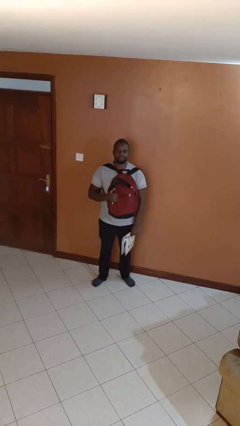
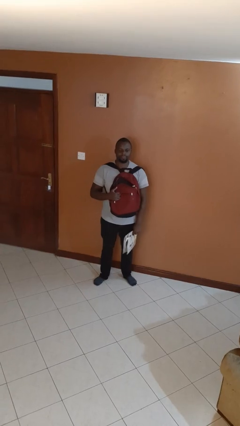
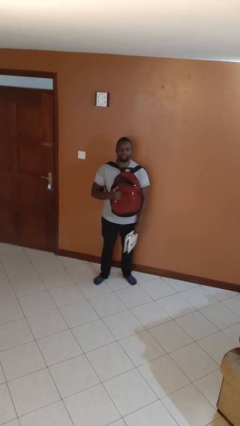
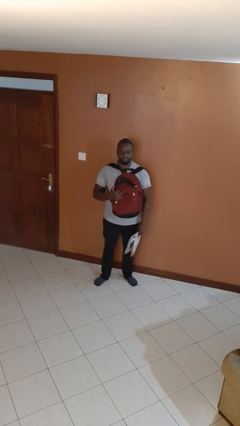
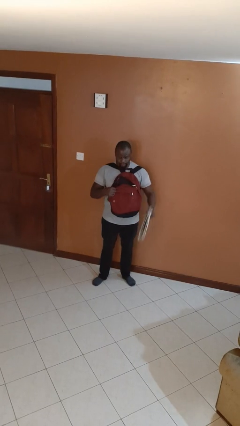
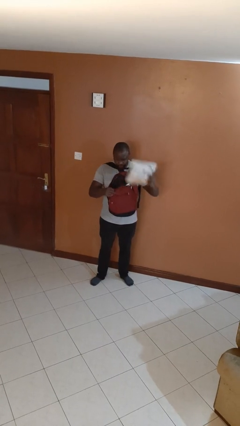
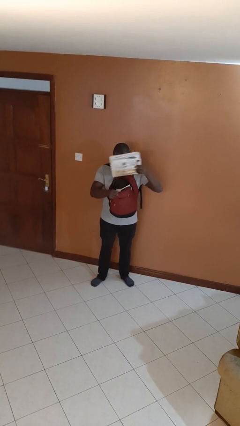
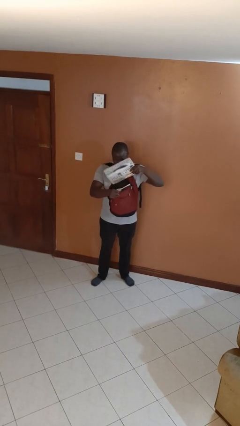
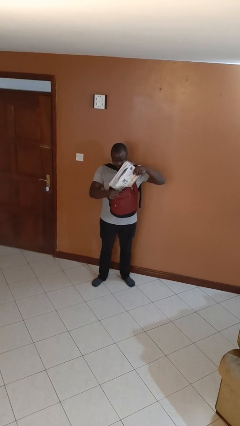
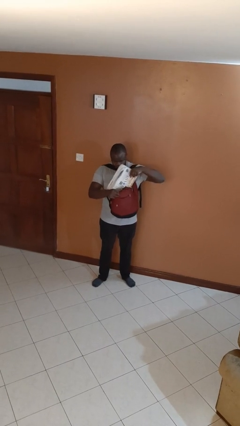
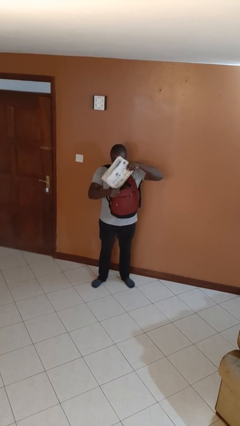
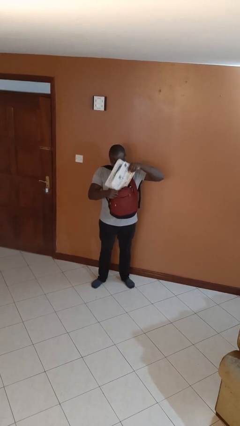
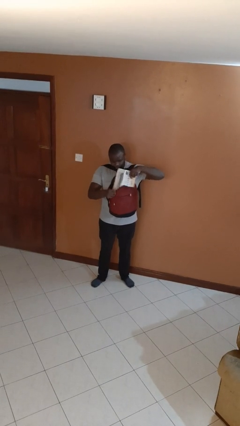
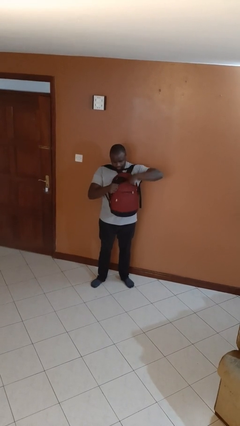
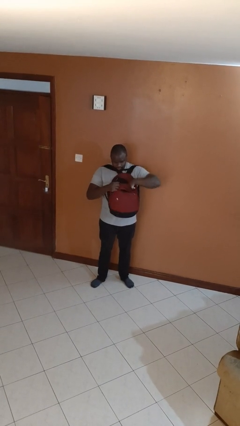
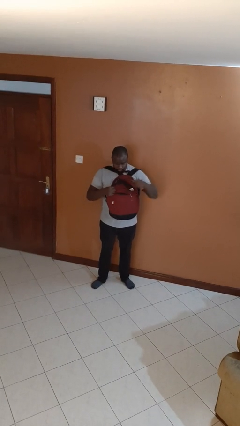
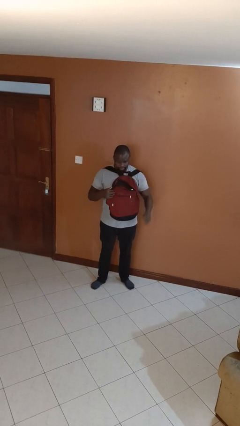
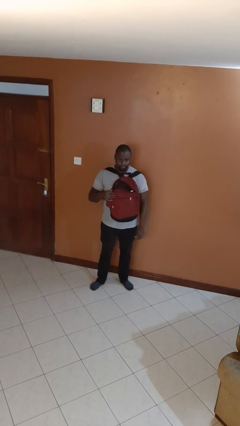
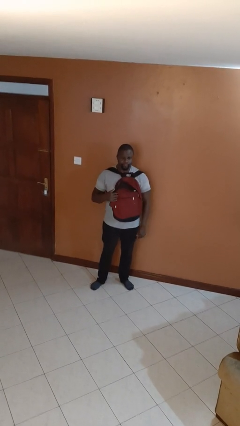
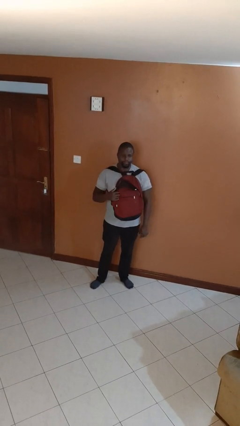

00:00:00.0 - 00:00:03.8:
person puts object into backpack

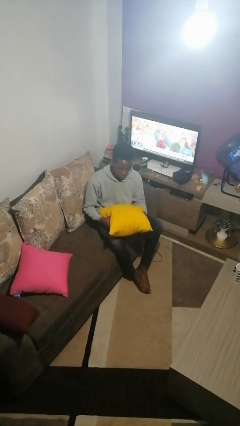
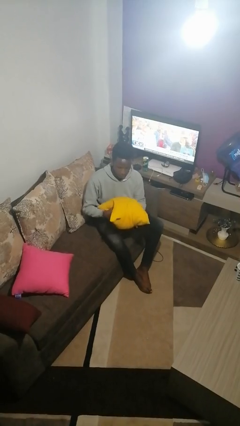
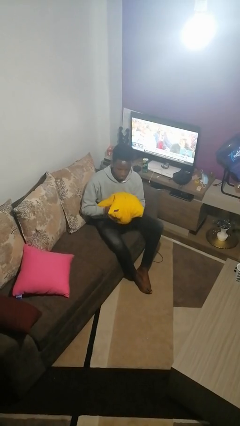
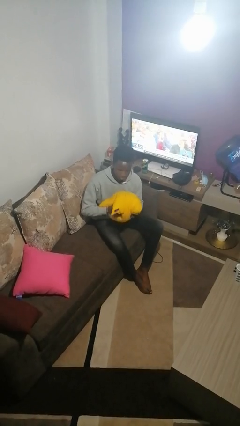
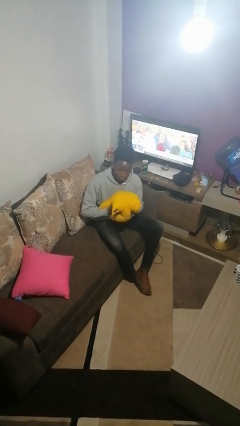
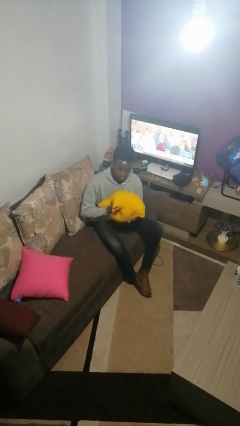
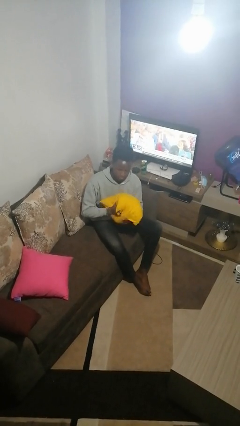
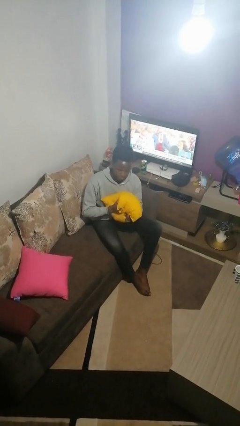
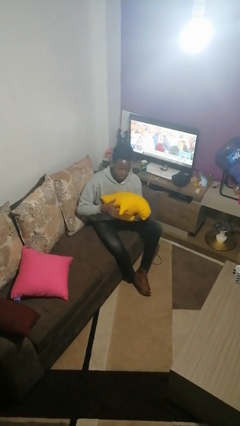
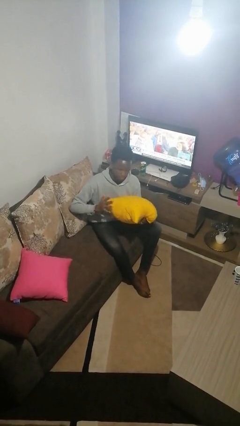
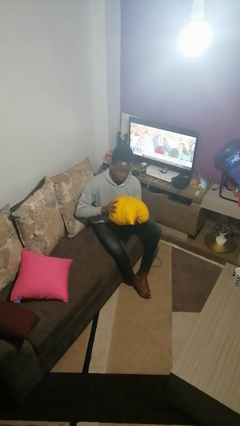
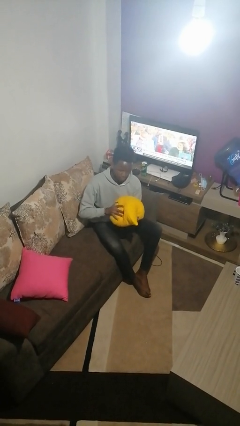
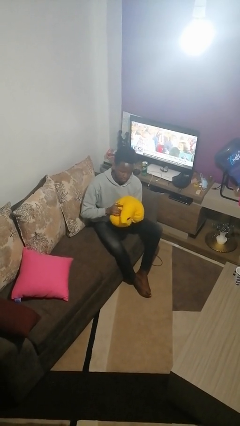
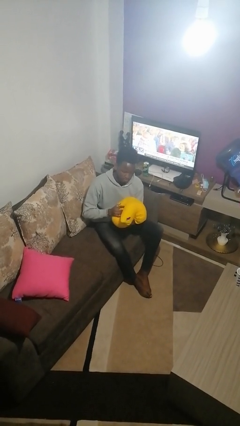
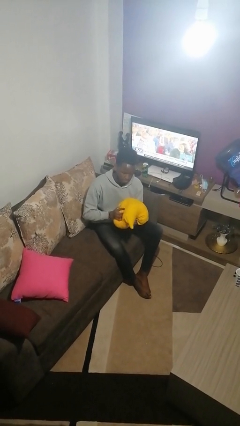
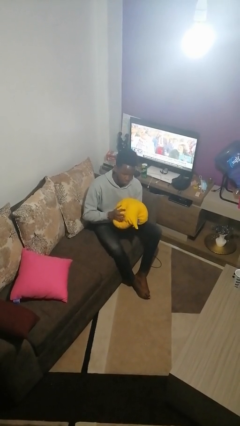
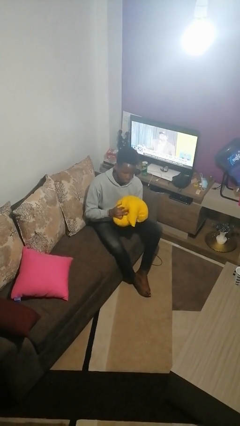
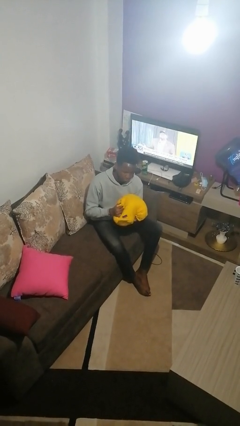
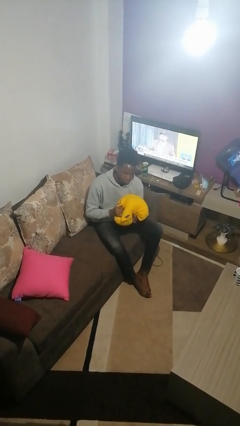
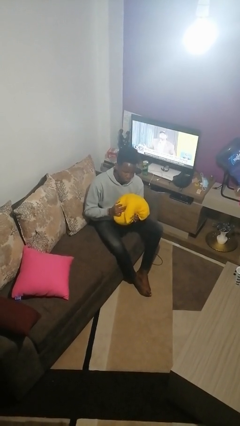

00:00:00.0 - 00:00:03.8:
person squeezes object

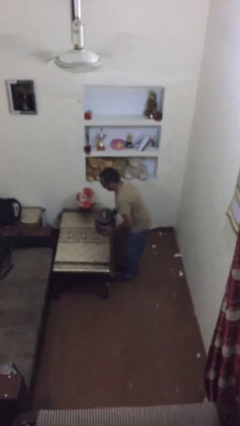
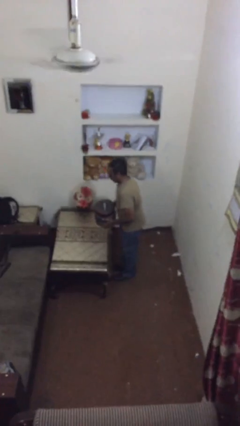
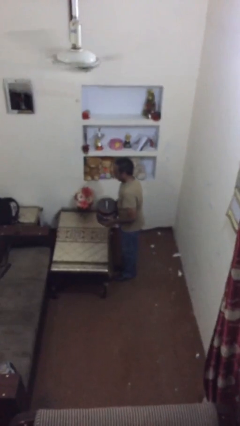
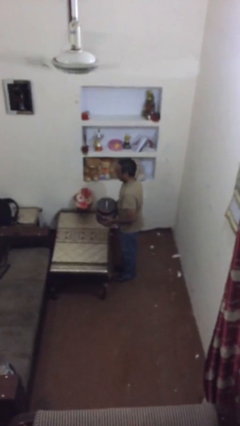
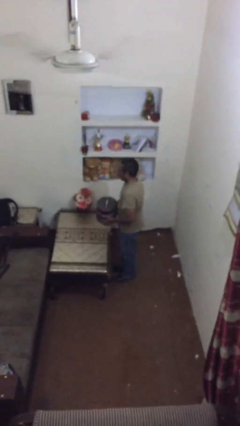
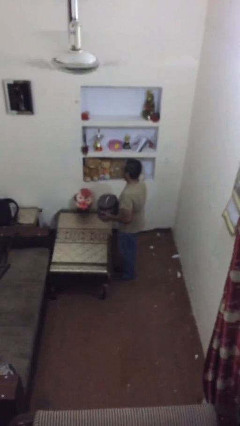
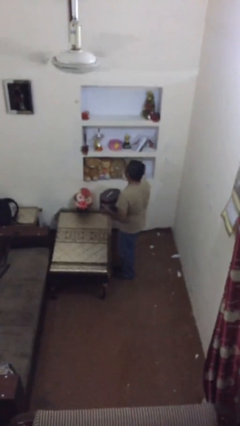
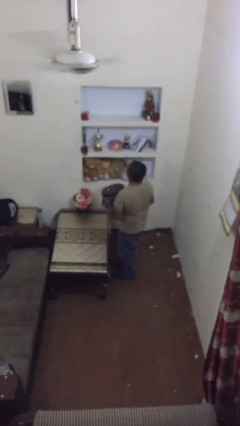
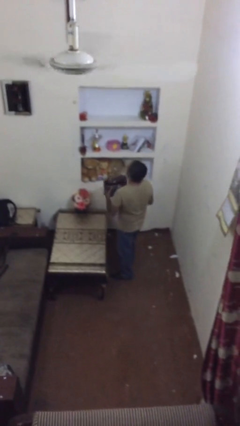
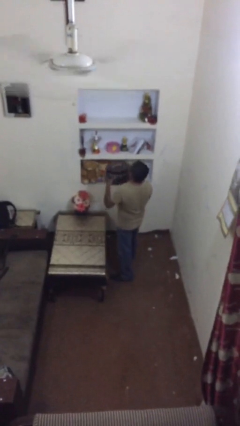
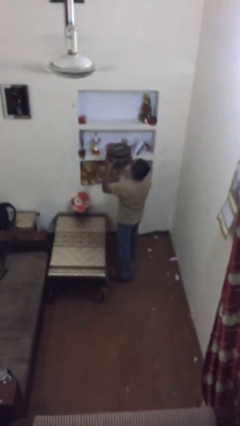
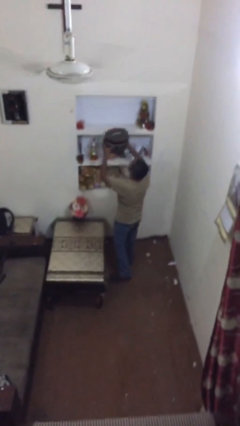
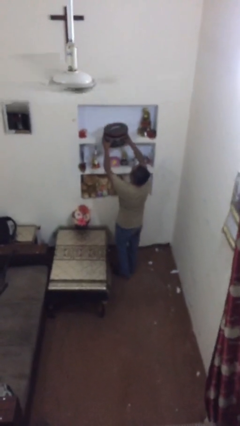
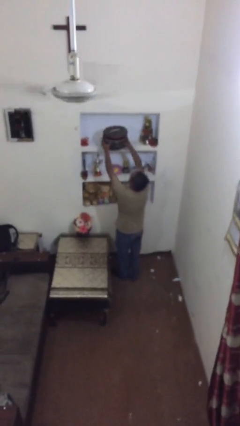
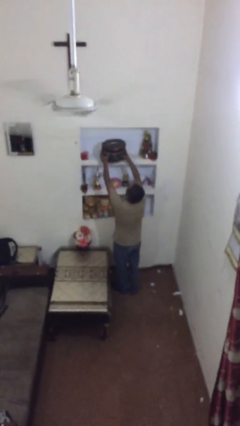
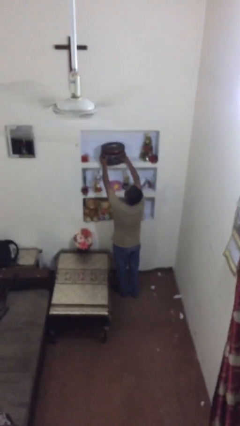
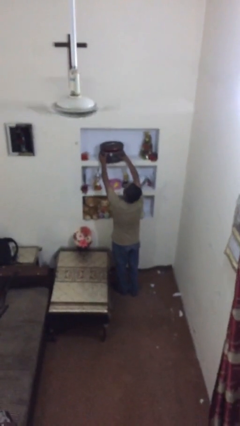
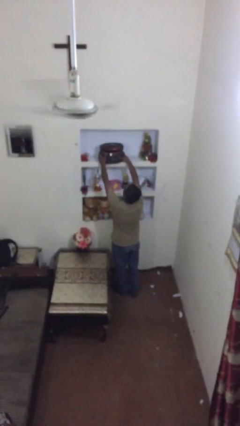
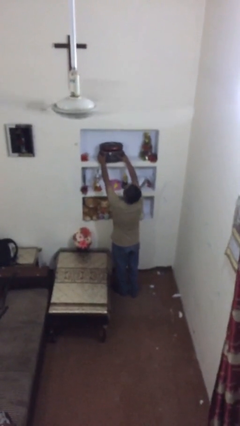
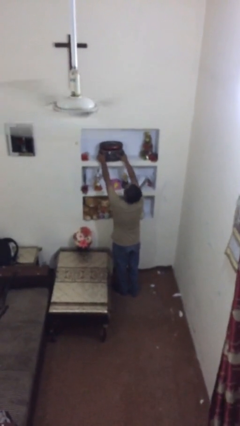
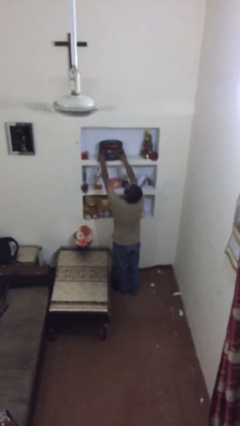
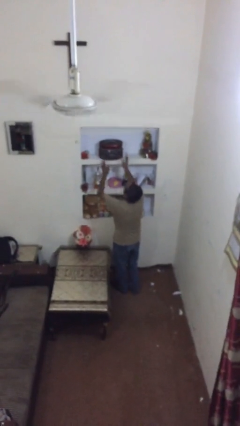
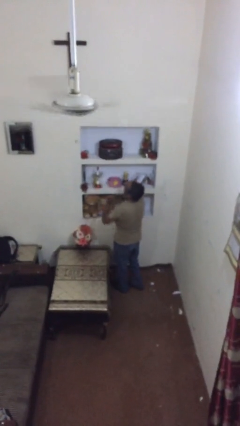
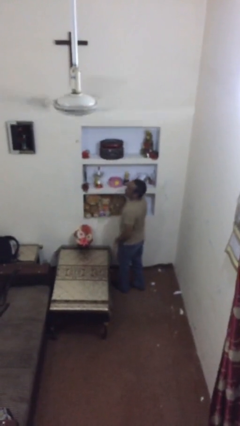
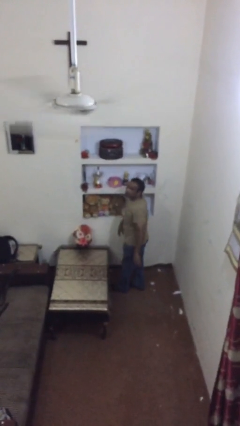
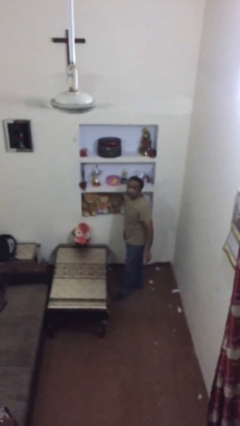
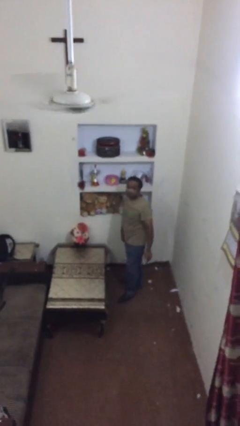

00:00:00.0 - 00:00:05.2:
person puts down object on shelf

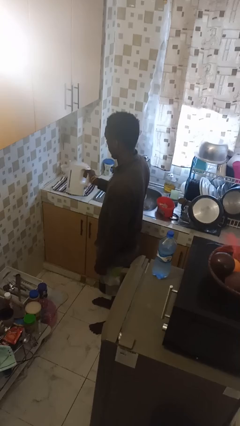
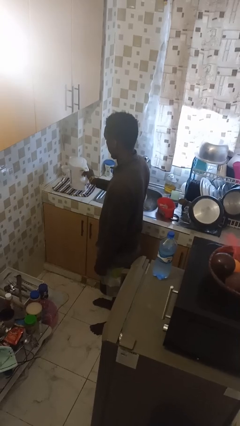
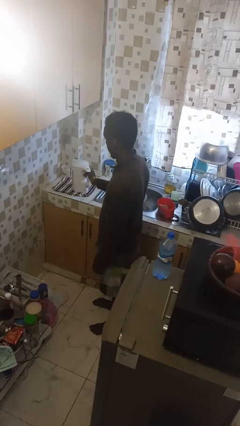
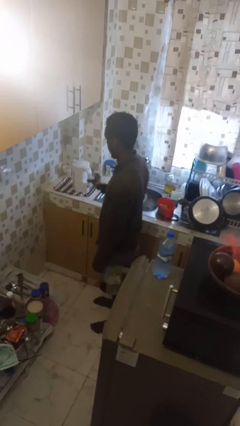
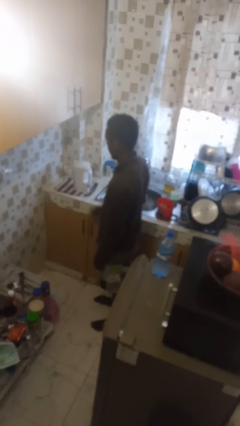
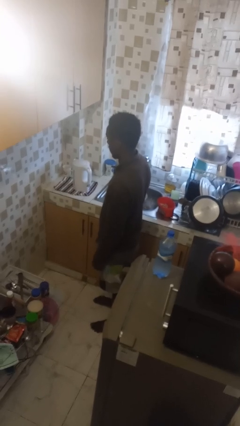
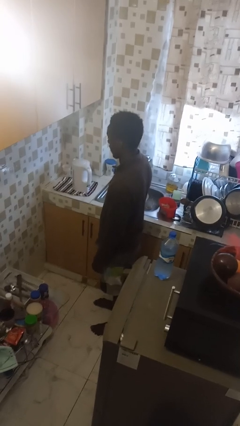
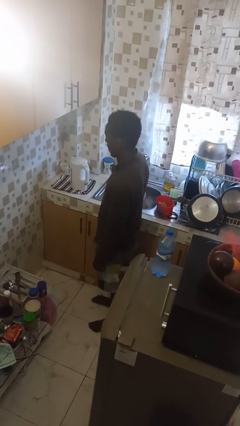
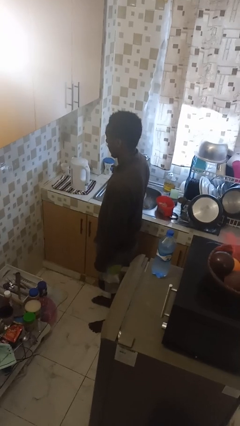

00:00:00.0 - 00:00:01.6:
person puts down object on countertop

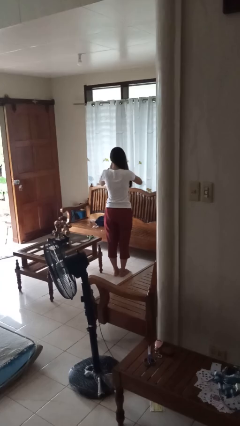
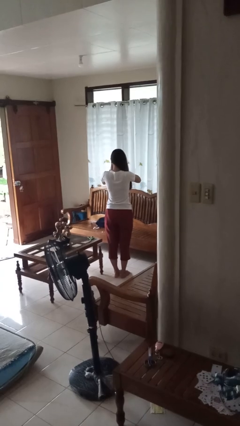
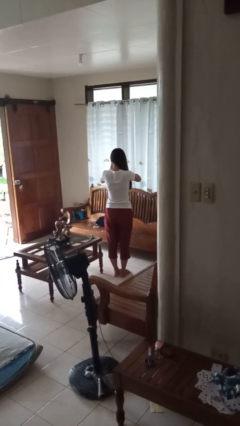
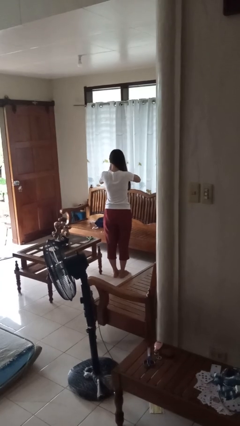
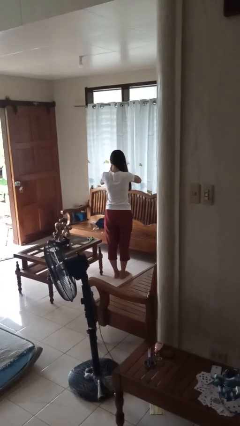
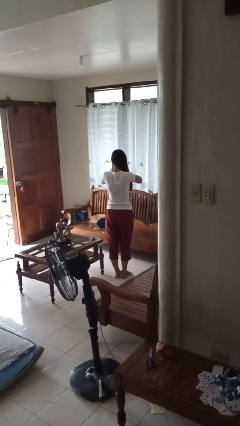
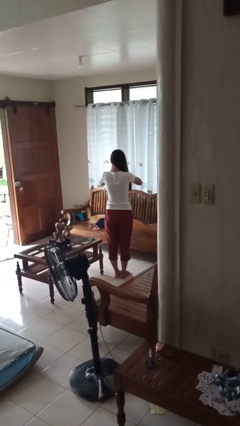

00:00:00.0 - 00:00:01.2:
person covers face with hands

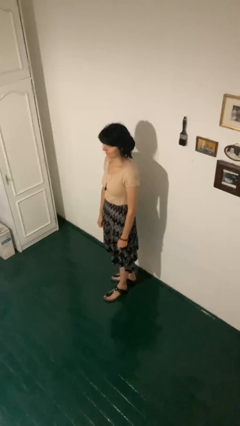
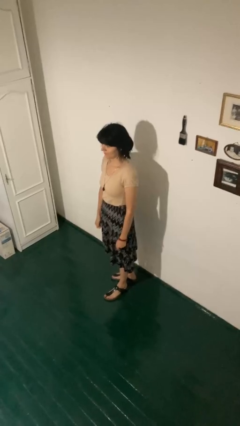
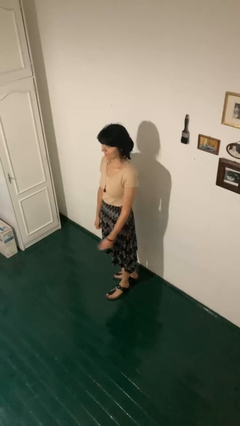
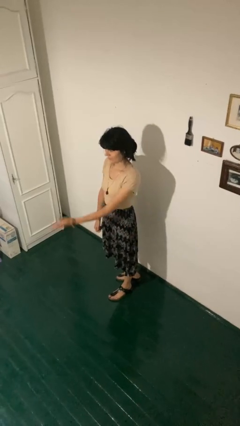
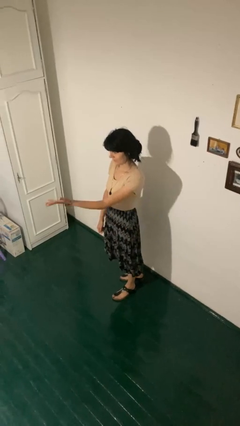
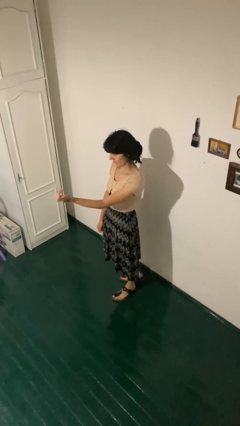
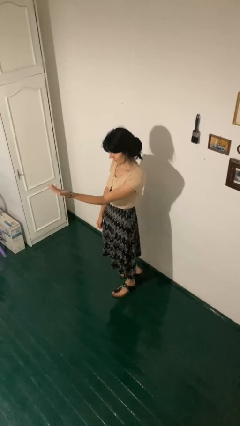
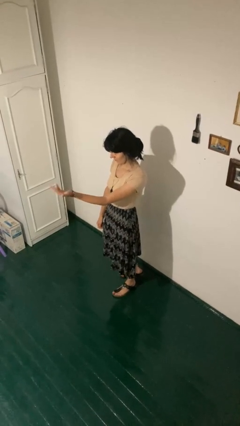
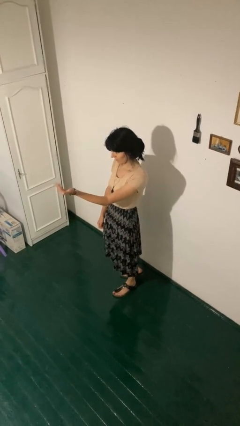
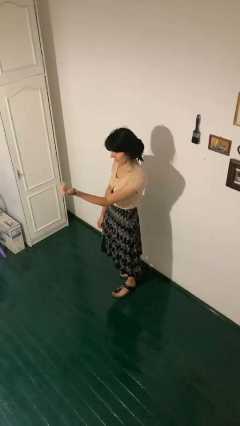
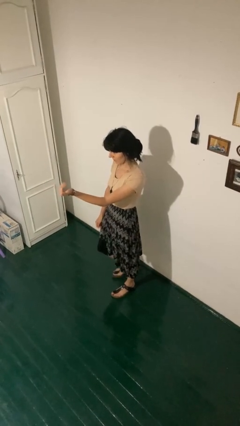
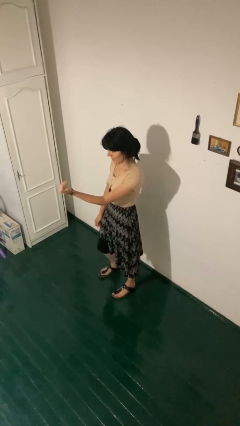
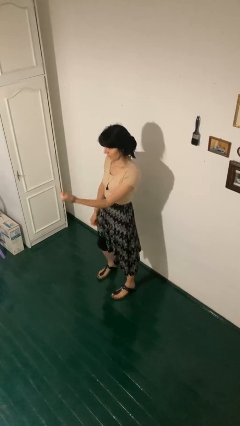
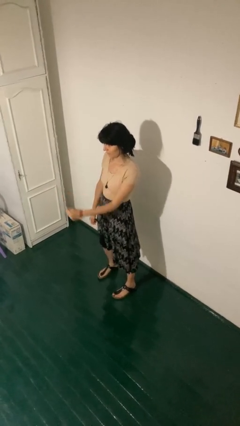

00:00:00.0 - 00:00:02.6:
person gestures come here
